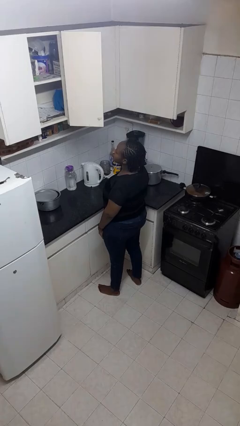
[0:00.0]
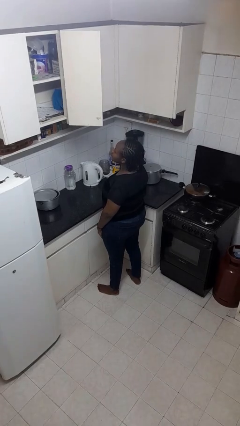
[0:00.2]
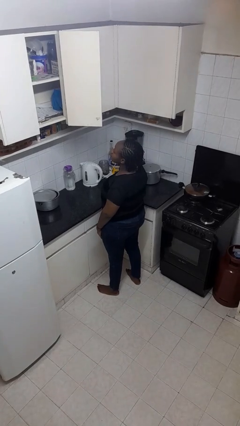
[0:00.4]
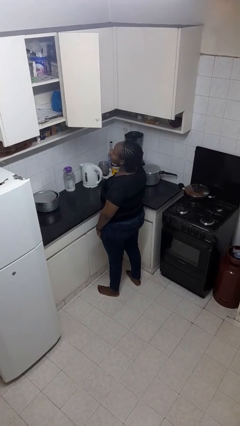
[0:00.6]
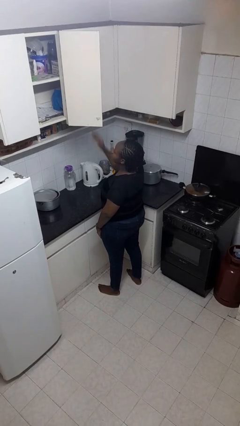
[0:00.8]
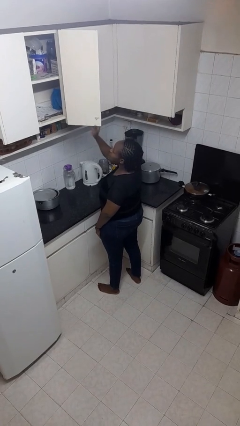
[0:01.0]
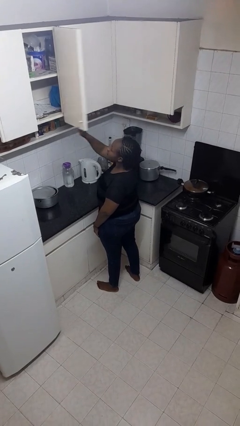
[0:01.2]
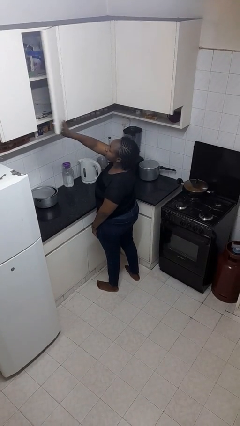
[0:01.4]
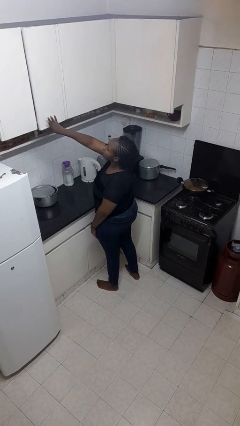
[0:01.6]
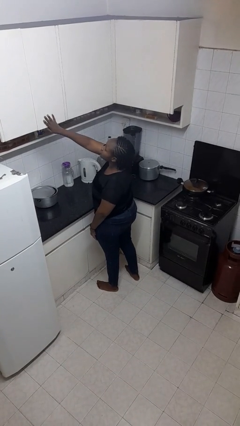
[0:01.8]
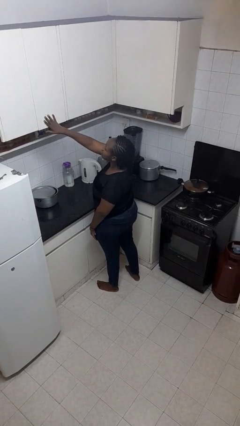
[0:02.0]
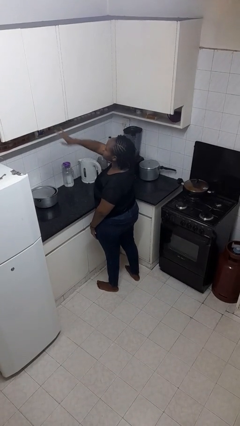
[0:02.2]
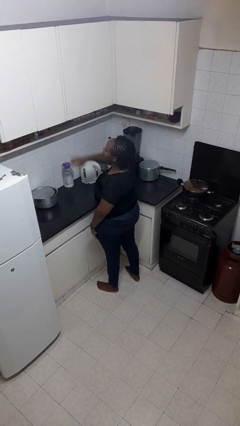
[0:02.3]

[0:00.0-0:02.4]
person closes cabinet

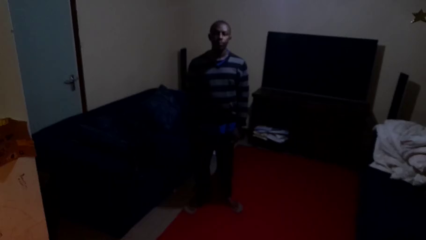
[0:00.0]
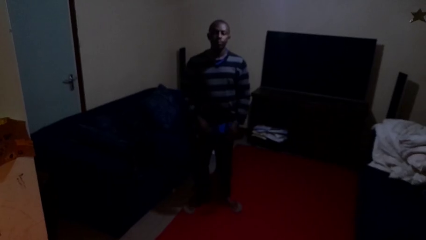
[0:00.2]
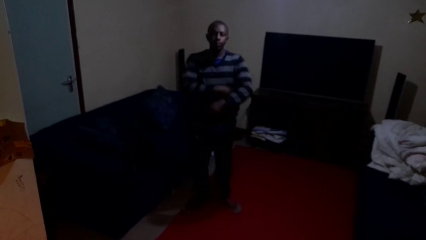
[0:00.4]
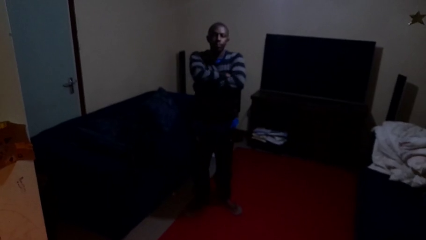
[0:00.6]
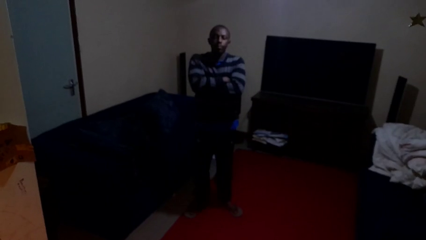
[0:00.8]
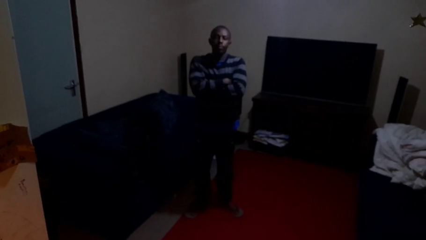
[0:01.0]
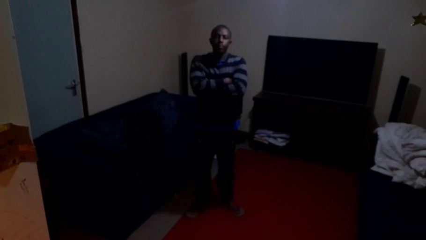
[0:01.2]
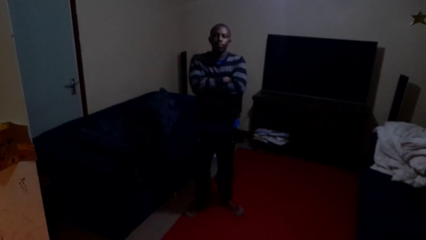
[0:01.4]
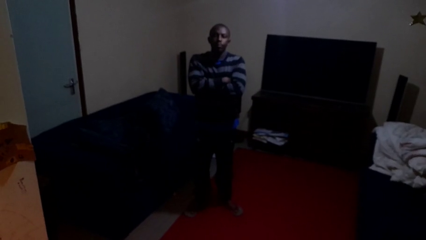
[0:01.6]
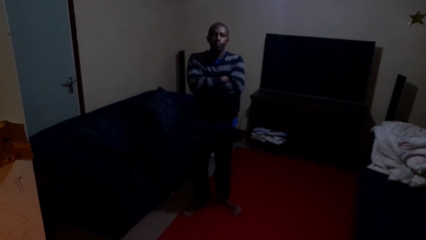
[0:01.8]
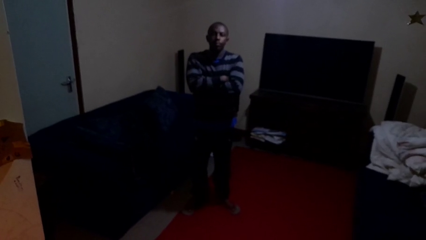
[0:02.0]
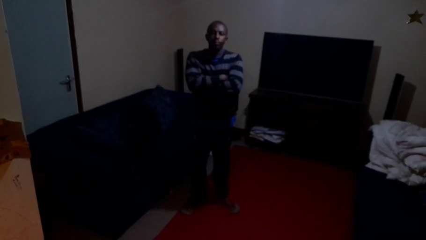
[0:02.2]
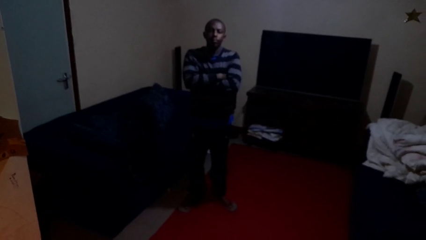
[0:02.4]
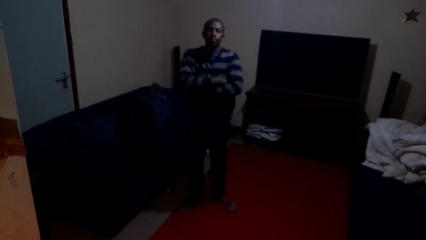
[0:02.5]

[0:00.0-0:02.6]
person crosses arms

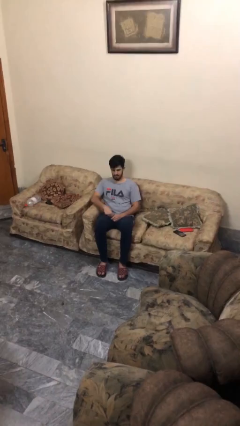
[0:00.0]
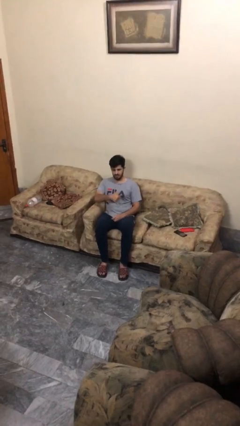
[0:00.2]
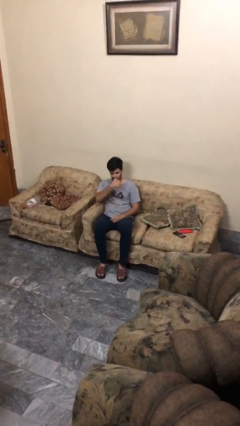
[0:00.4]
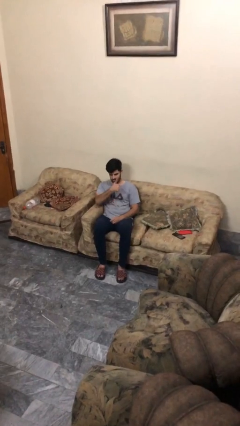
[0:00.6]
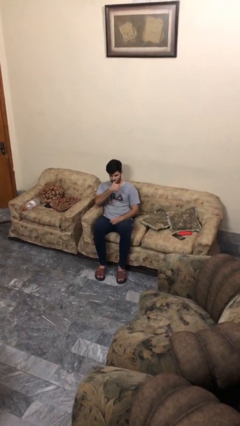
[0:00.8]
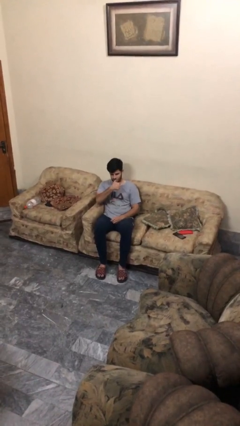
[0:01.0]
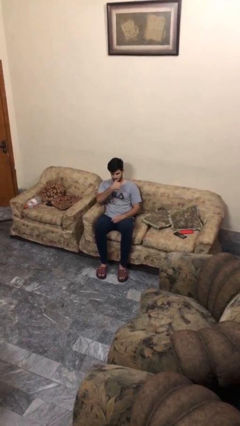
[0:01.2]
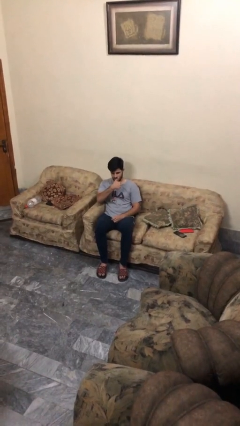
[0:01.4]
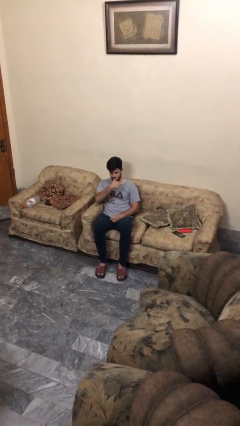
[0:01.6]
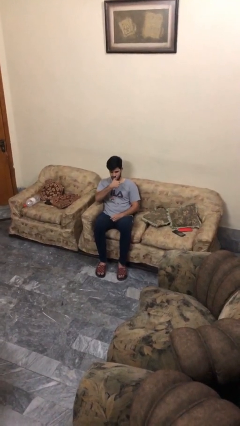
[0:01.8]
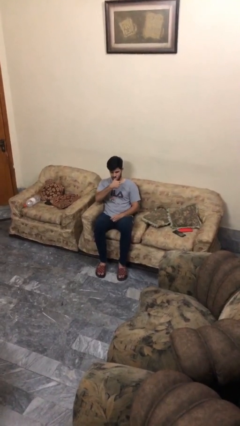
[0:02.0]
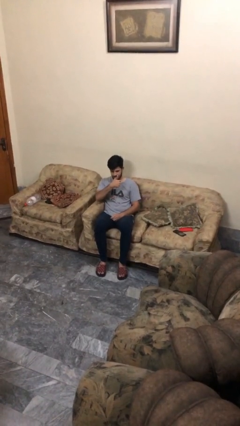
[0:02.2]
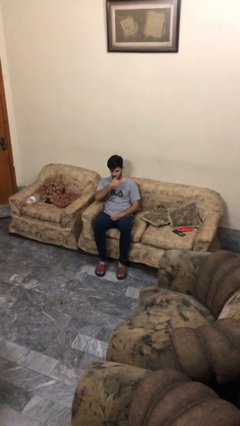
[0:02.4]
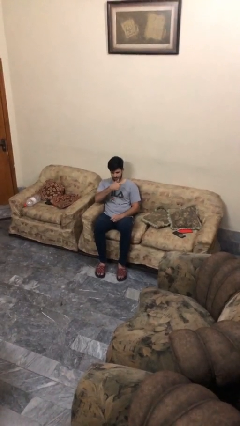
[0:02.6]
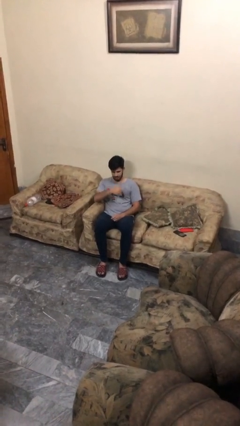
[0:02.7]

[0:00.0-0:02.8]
person gestures thumbs up

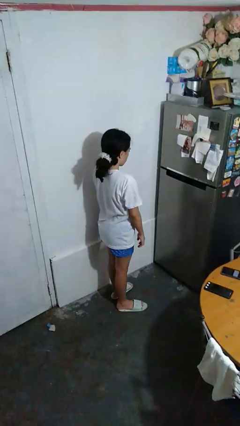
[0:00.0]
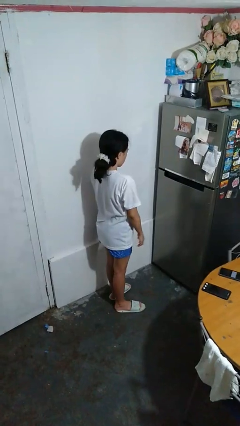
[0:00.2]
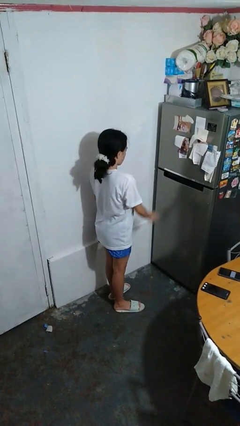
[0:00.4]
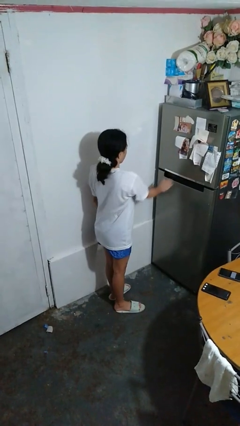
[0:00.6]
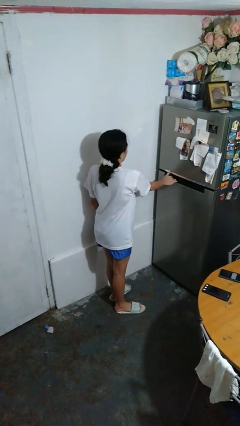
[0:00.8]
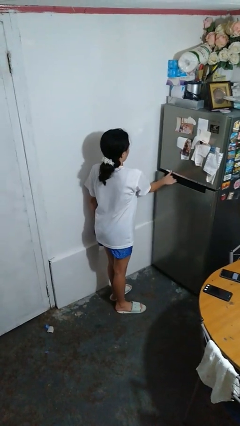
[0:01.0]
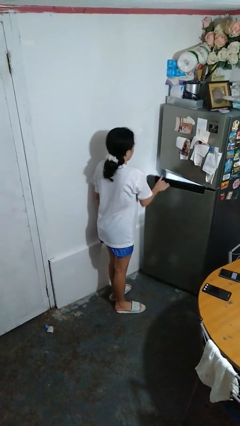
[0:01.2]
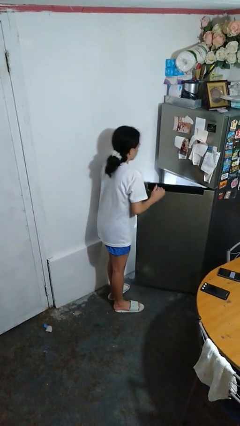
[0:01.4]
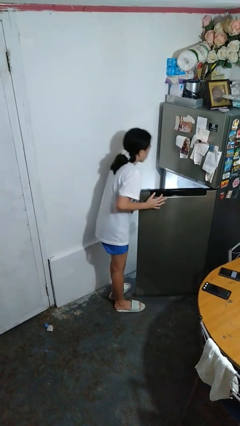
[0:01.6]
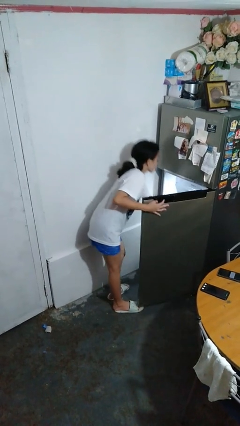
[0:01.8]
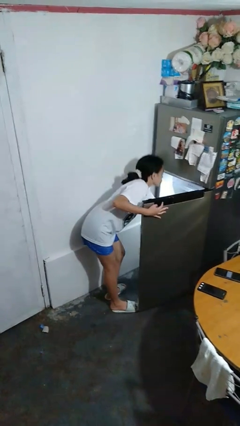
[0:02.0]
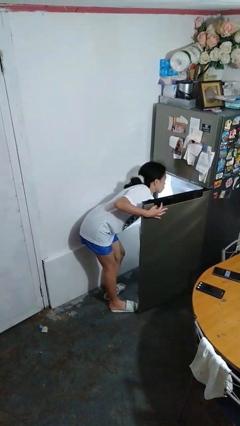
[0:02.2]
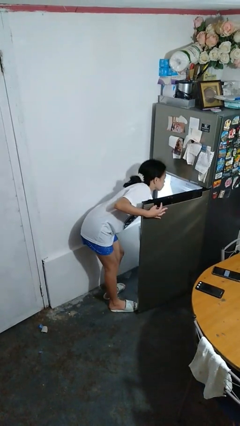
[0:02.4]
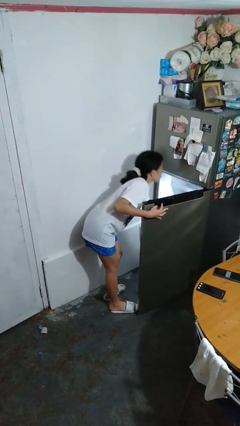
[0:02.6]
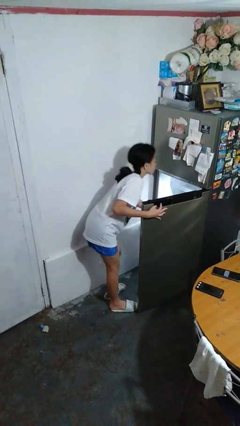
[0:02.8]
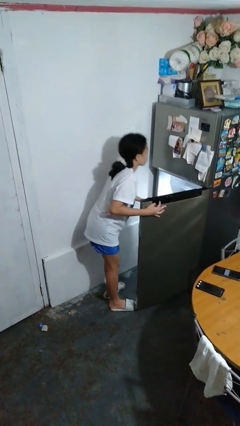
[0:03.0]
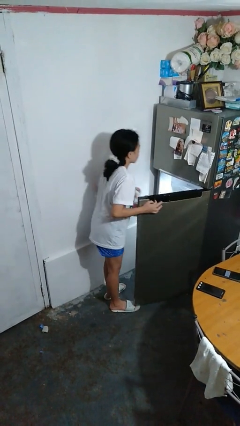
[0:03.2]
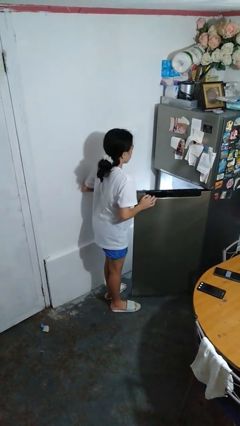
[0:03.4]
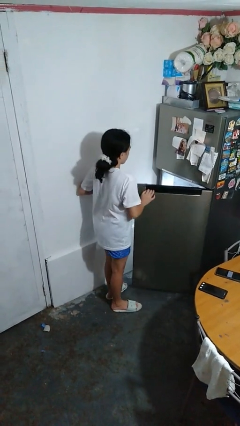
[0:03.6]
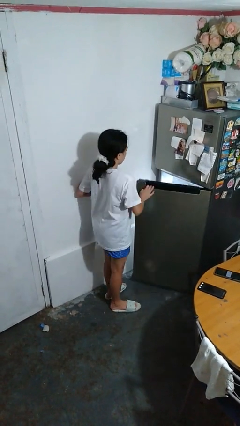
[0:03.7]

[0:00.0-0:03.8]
person takes object from refrigerator

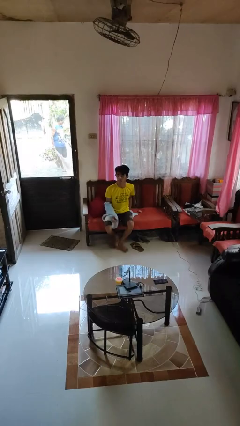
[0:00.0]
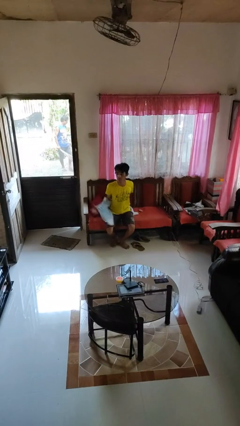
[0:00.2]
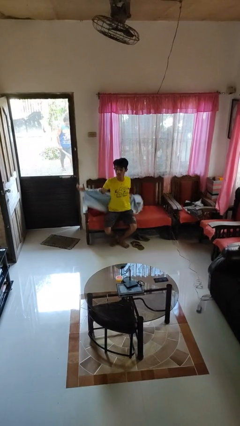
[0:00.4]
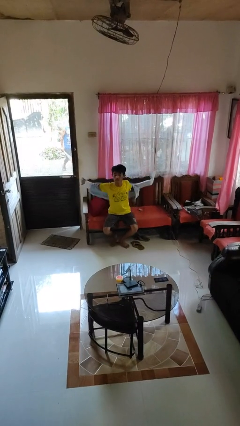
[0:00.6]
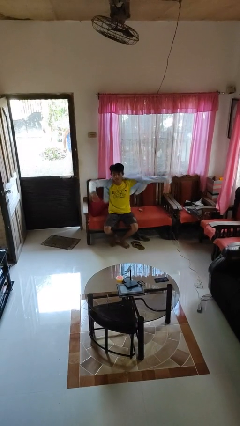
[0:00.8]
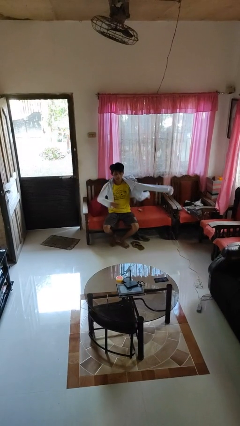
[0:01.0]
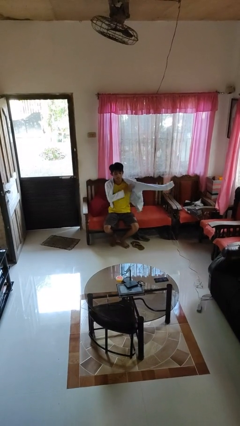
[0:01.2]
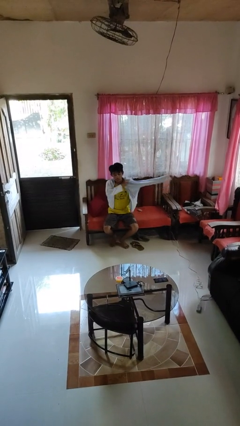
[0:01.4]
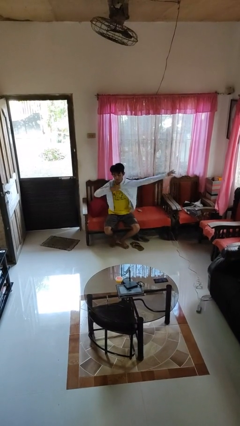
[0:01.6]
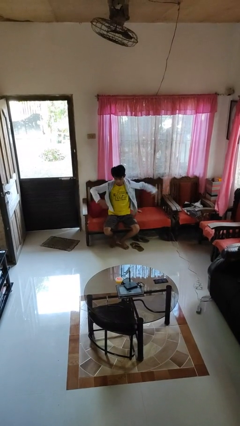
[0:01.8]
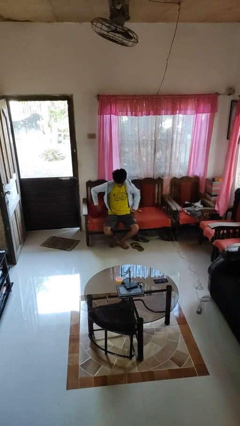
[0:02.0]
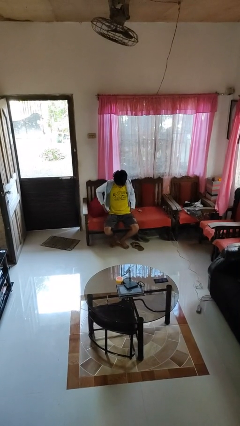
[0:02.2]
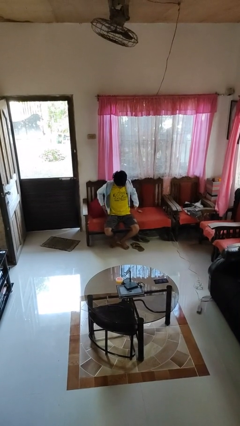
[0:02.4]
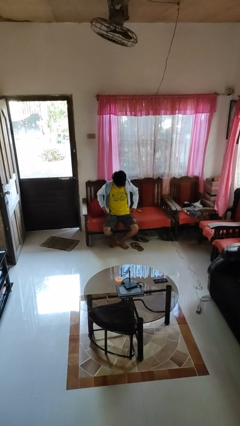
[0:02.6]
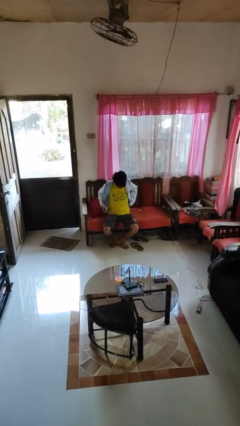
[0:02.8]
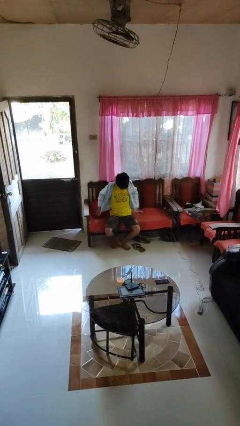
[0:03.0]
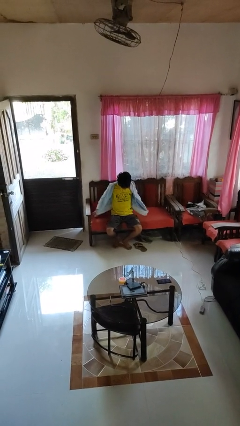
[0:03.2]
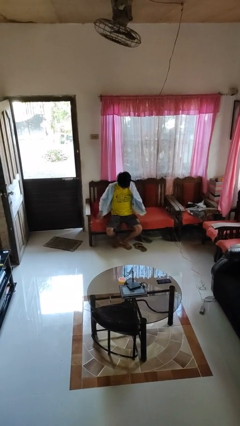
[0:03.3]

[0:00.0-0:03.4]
person puts on jacket

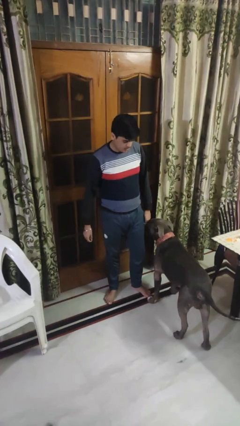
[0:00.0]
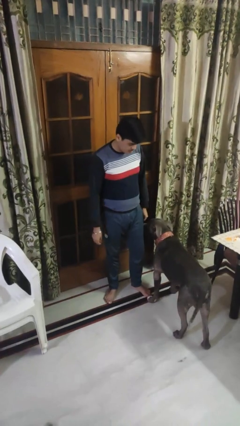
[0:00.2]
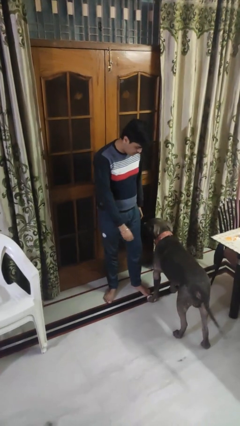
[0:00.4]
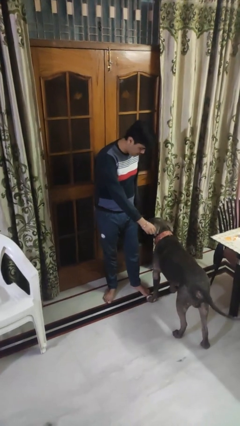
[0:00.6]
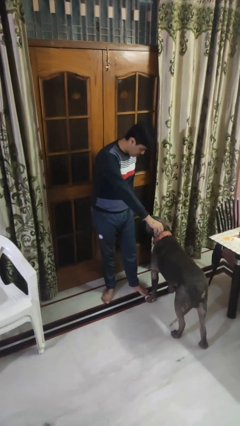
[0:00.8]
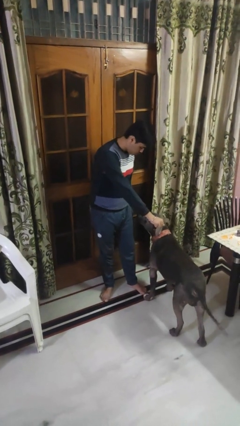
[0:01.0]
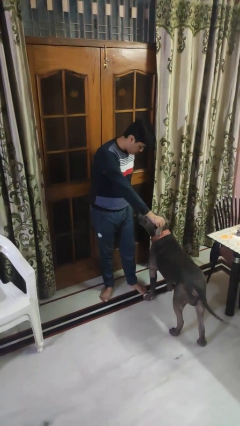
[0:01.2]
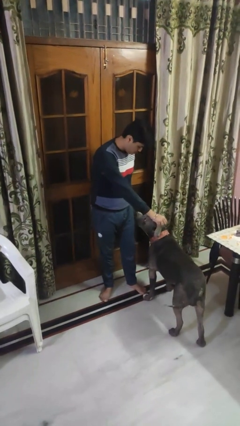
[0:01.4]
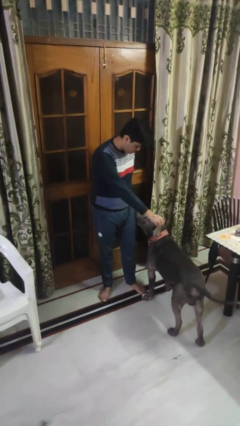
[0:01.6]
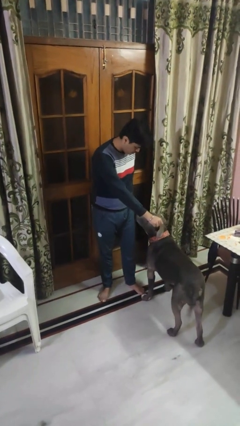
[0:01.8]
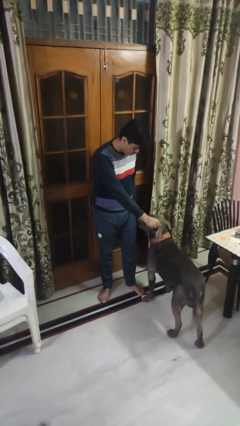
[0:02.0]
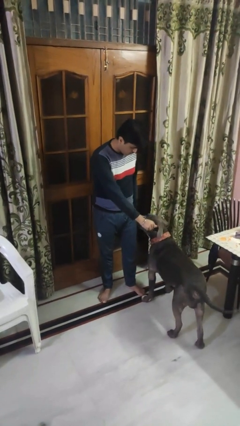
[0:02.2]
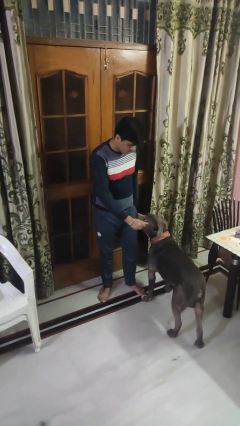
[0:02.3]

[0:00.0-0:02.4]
person points to dog
